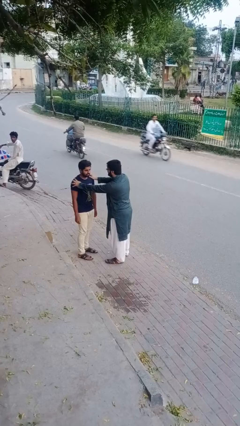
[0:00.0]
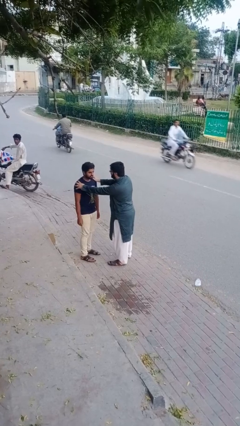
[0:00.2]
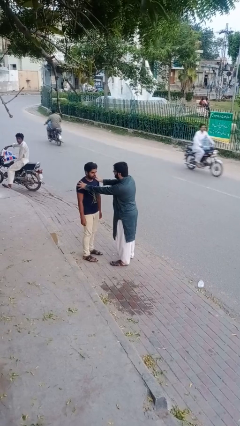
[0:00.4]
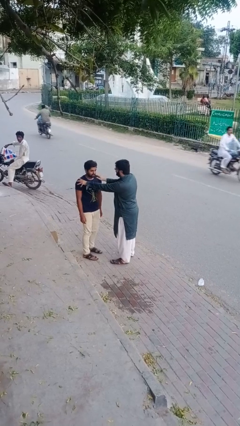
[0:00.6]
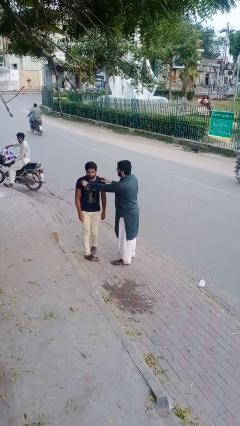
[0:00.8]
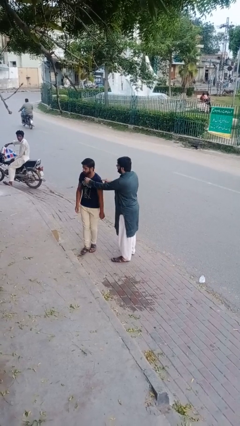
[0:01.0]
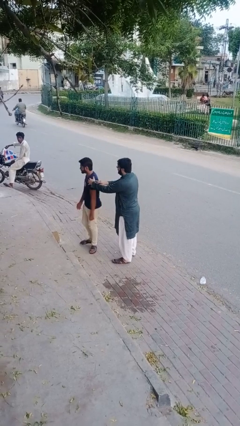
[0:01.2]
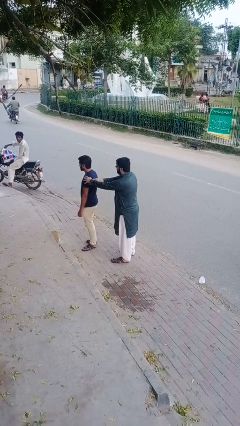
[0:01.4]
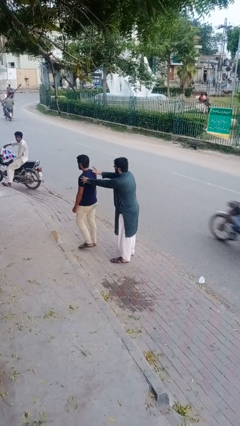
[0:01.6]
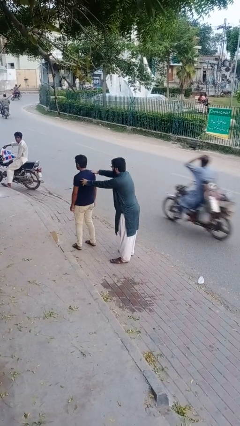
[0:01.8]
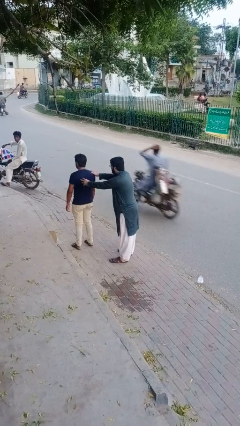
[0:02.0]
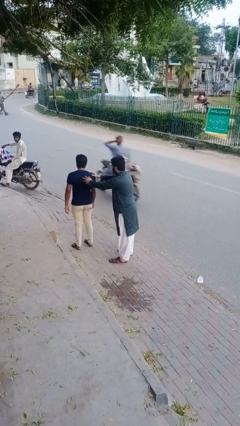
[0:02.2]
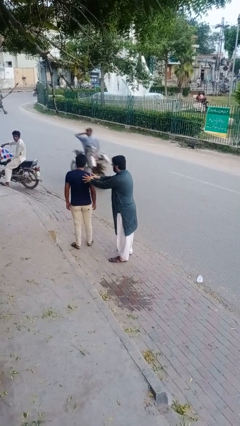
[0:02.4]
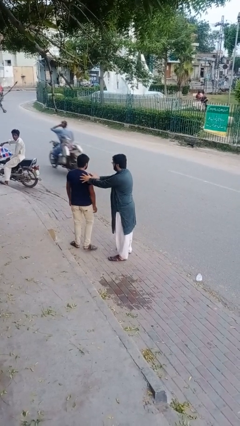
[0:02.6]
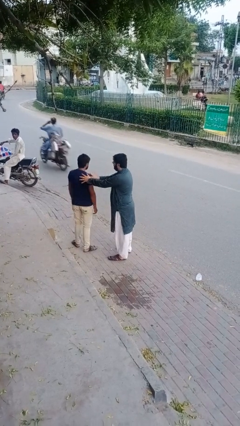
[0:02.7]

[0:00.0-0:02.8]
person grabs person by shoulder

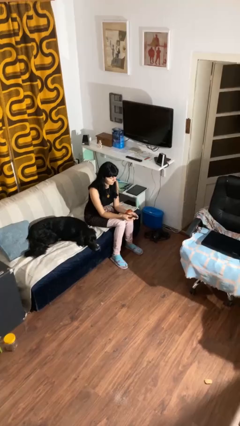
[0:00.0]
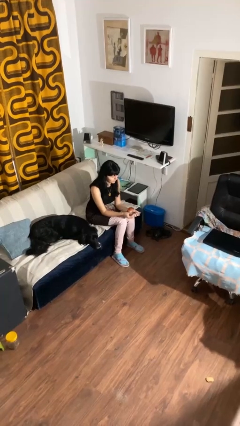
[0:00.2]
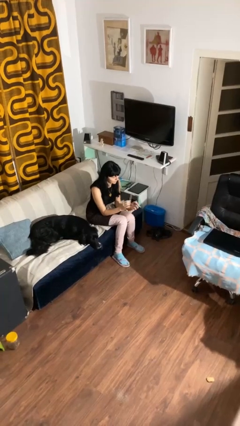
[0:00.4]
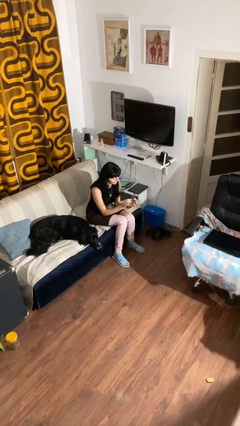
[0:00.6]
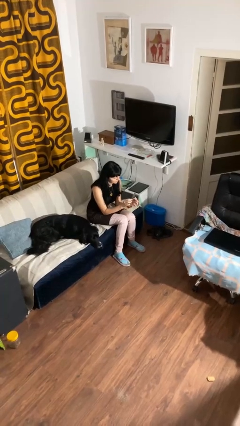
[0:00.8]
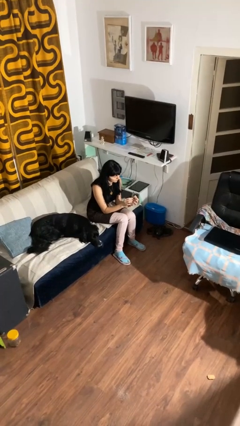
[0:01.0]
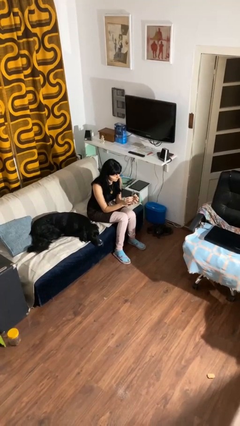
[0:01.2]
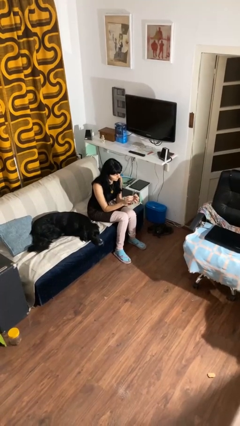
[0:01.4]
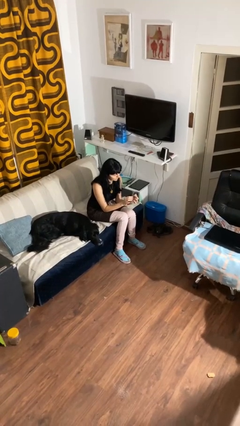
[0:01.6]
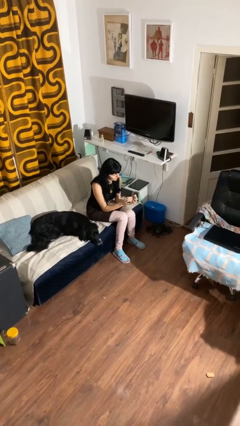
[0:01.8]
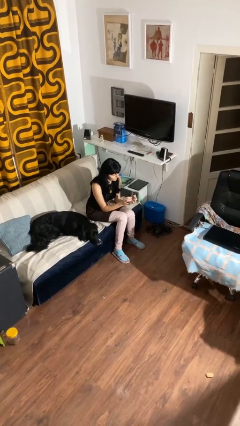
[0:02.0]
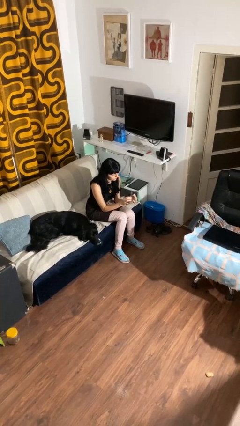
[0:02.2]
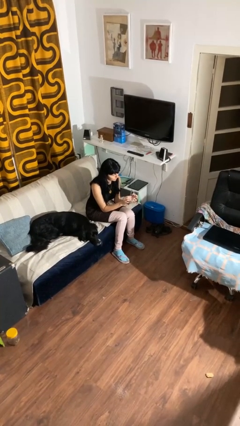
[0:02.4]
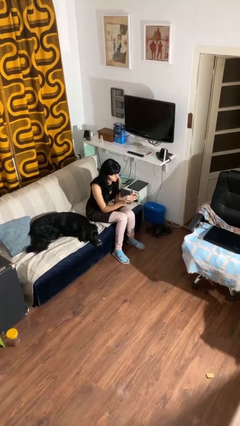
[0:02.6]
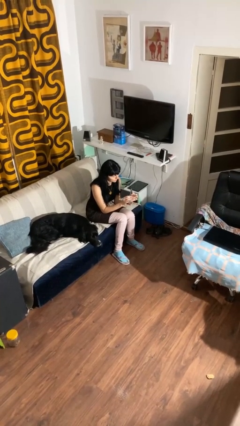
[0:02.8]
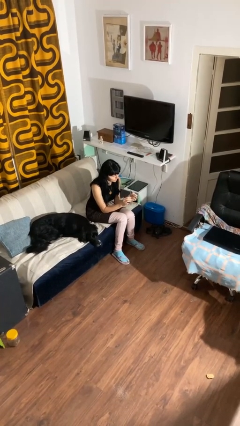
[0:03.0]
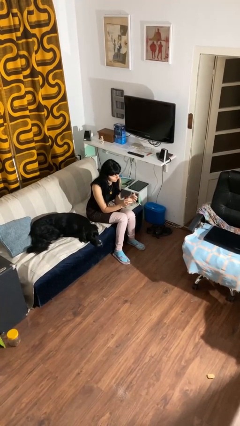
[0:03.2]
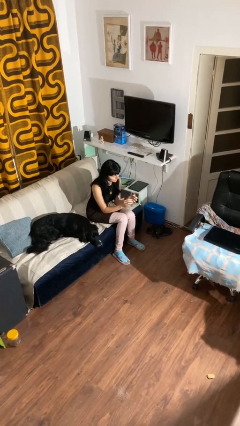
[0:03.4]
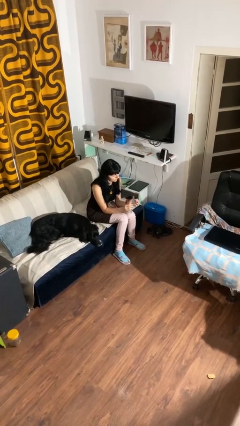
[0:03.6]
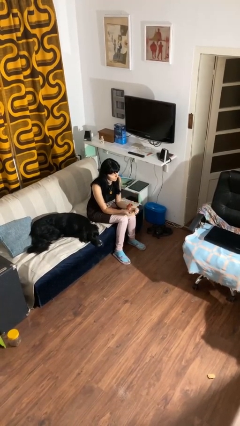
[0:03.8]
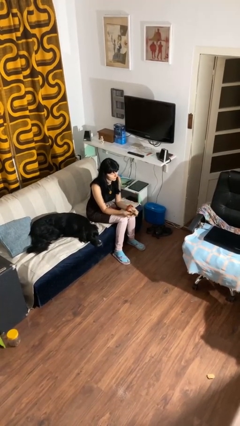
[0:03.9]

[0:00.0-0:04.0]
person files fingernails

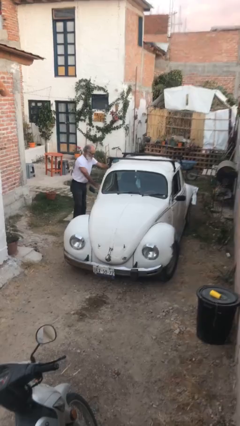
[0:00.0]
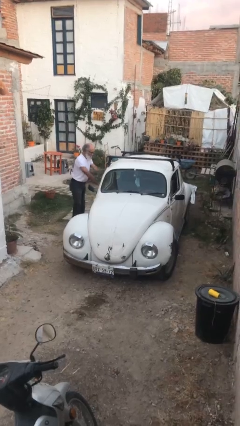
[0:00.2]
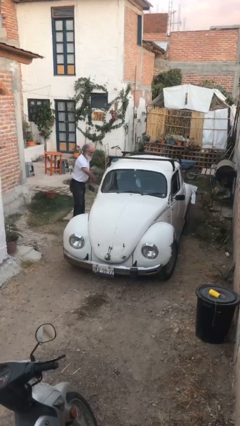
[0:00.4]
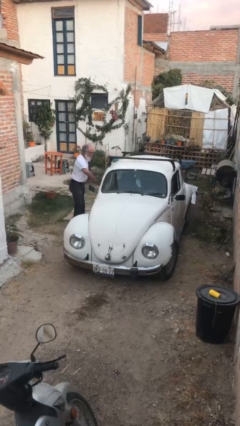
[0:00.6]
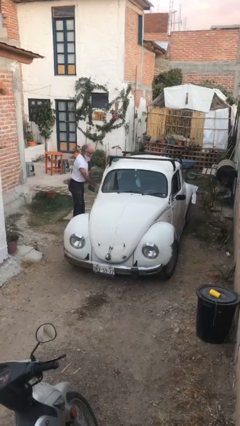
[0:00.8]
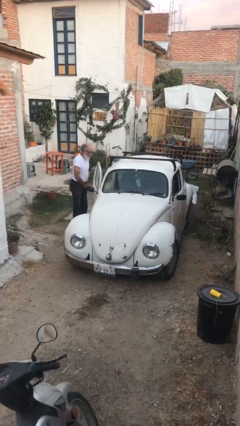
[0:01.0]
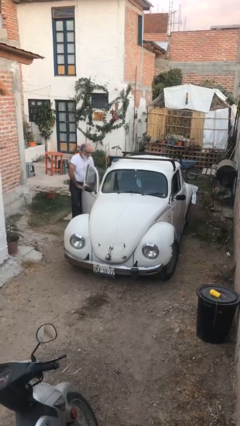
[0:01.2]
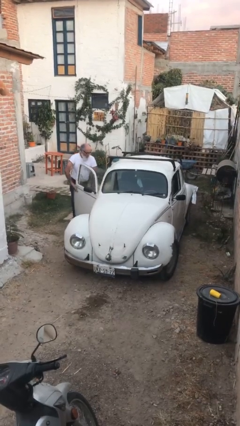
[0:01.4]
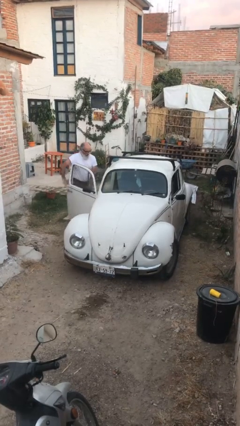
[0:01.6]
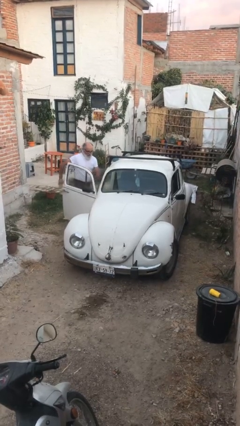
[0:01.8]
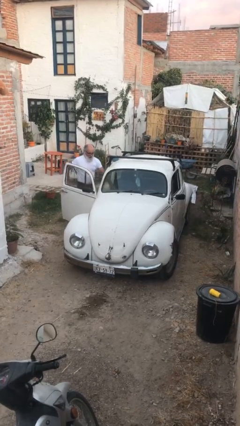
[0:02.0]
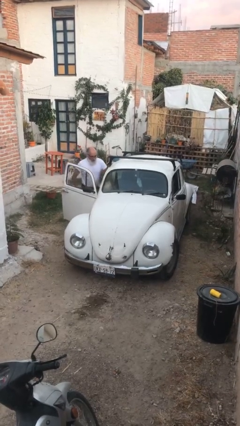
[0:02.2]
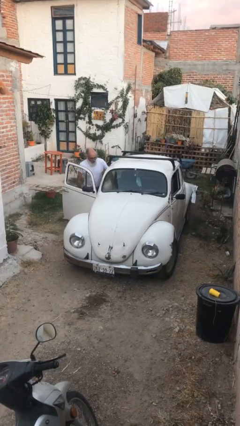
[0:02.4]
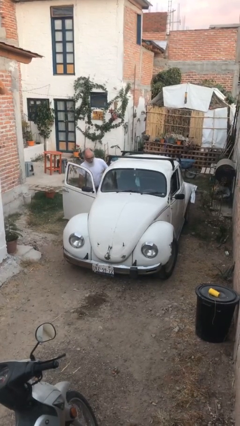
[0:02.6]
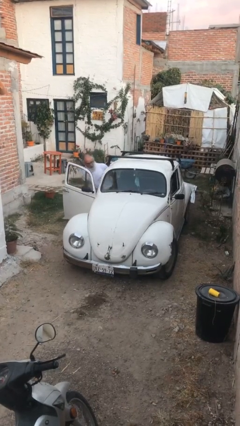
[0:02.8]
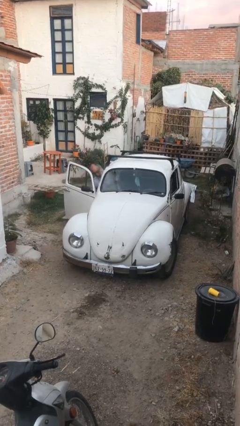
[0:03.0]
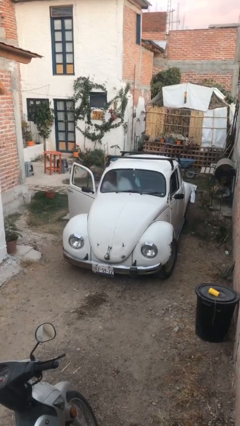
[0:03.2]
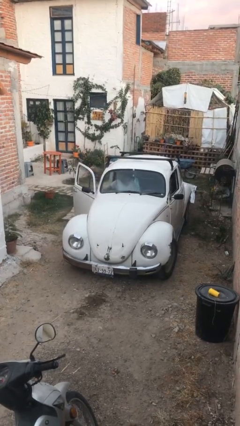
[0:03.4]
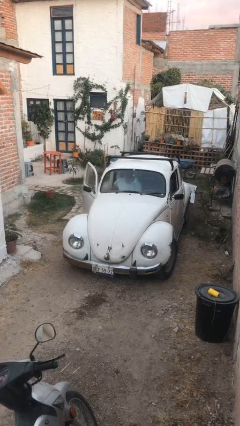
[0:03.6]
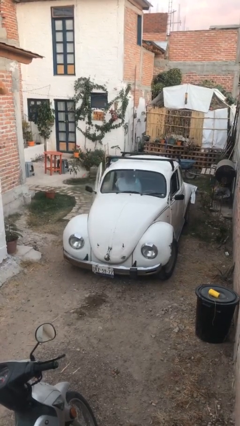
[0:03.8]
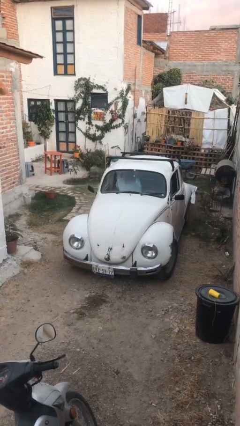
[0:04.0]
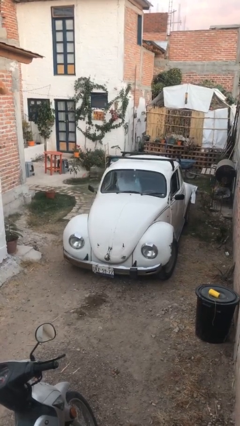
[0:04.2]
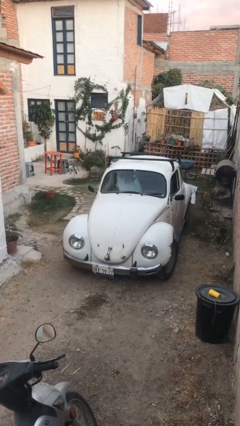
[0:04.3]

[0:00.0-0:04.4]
car picks up person

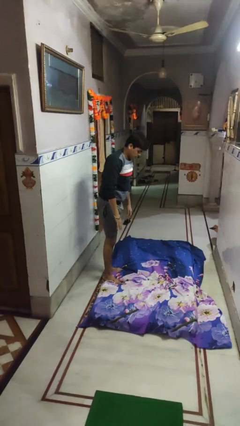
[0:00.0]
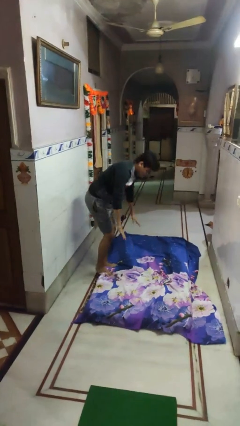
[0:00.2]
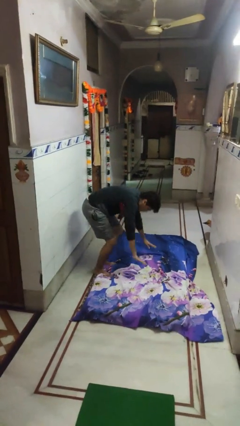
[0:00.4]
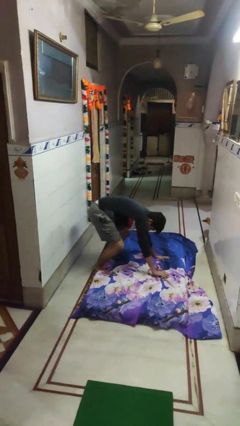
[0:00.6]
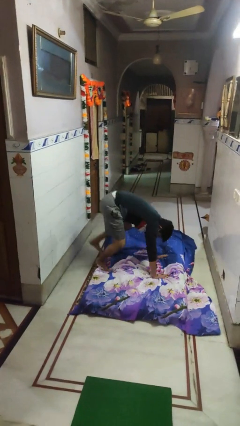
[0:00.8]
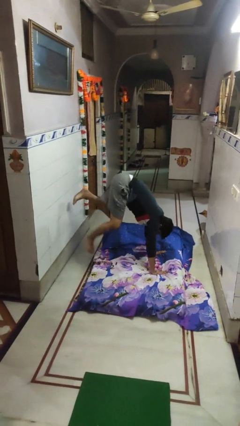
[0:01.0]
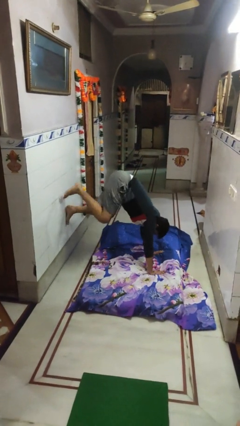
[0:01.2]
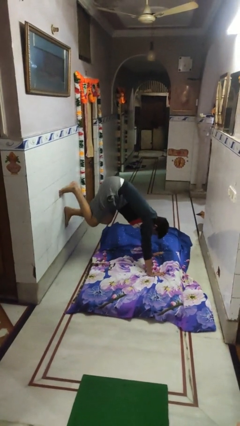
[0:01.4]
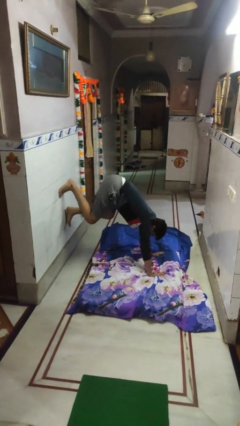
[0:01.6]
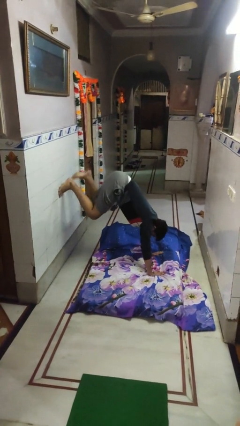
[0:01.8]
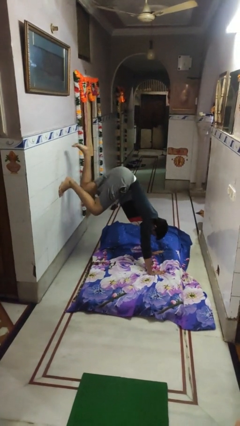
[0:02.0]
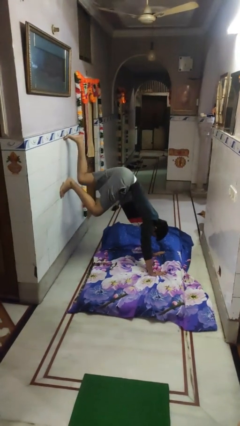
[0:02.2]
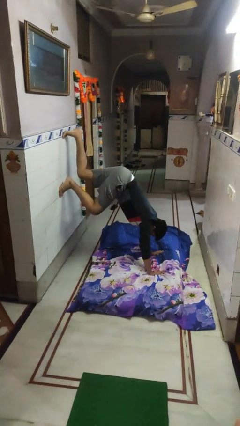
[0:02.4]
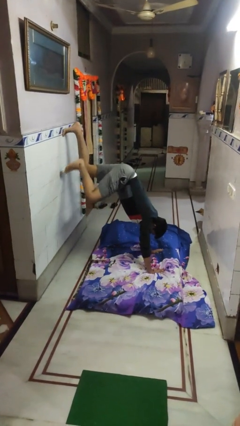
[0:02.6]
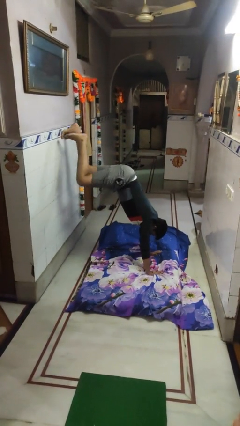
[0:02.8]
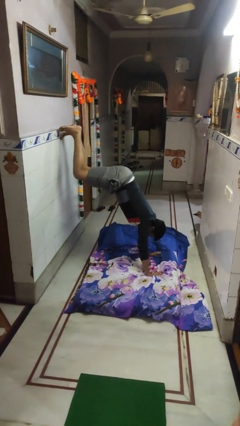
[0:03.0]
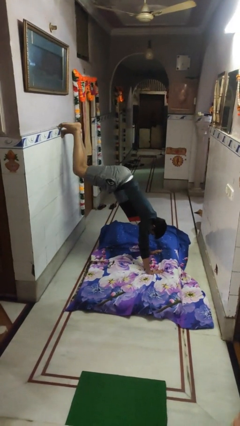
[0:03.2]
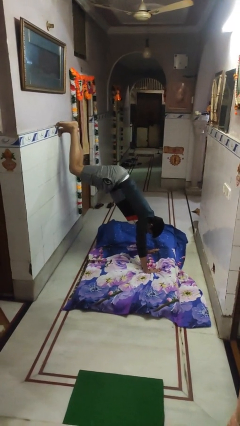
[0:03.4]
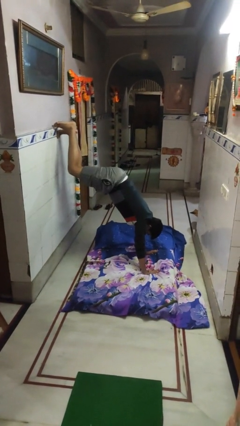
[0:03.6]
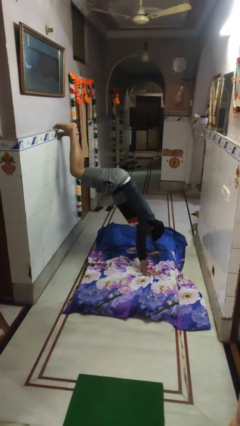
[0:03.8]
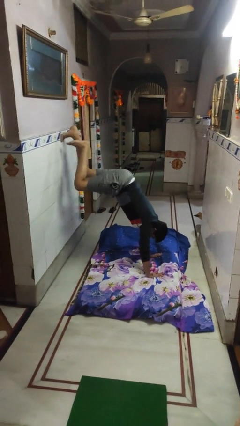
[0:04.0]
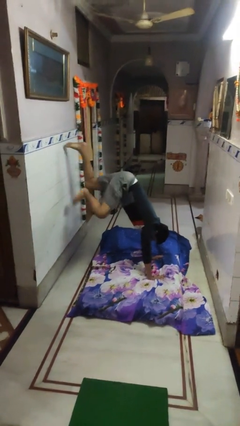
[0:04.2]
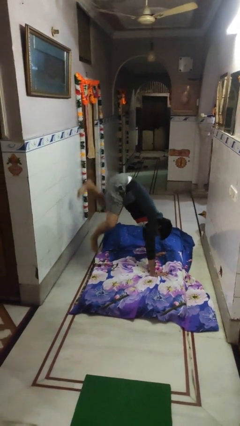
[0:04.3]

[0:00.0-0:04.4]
person handstand

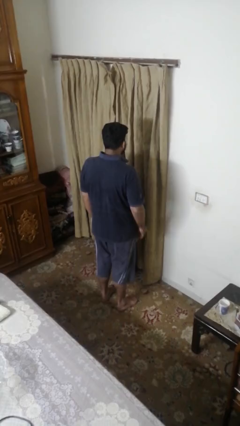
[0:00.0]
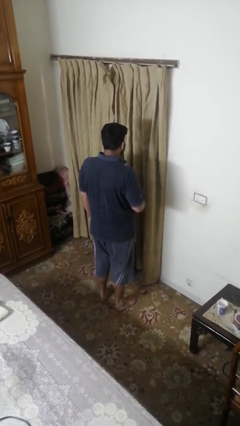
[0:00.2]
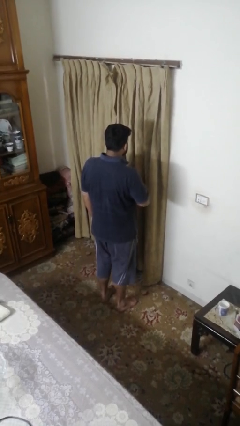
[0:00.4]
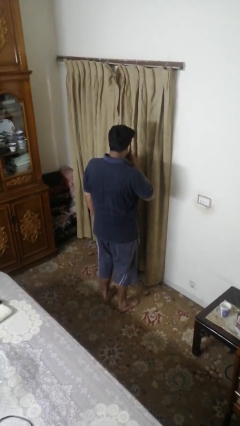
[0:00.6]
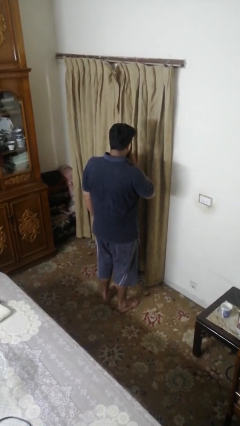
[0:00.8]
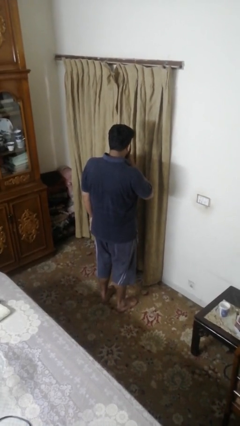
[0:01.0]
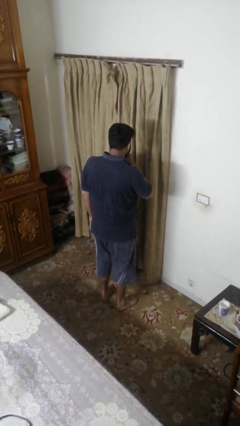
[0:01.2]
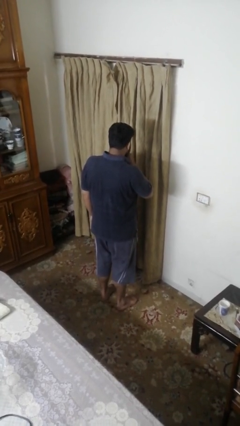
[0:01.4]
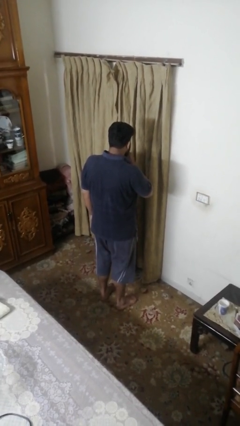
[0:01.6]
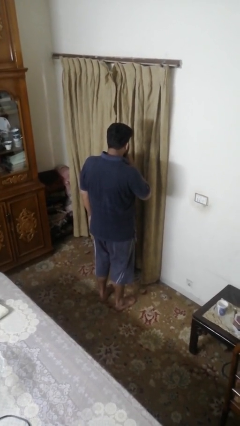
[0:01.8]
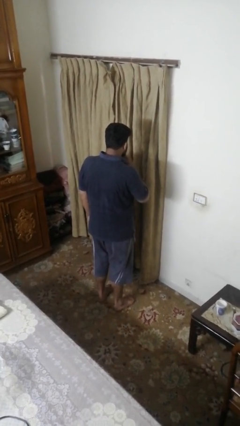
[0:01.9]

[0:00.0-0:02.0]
person gestures be quiet

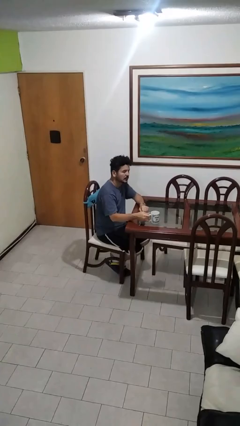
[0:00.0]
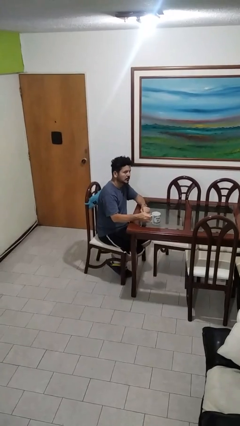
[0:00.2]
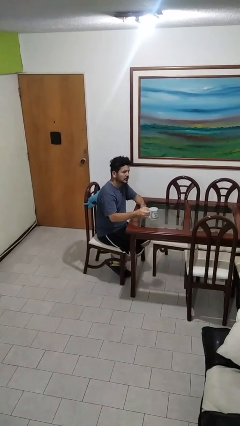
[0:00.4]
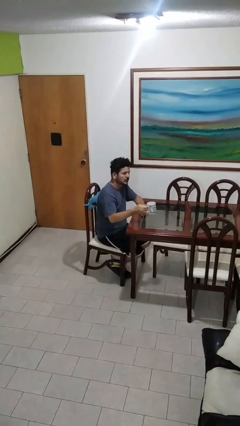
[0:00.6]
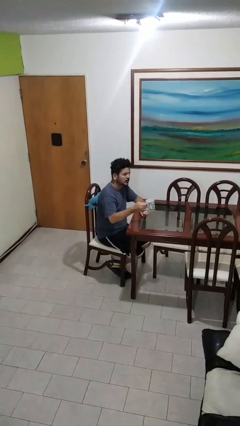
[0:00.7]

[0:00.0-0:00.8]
person picks up object from table
